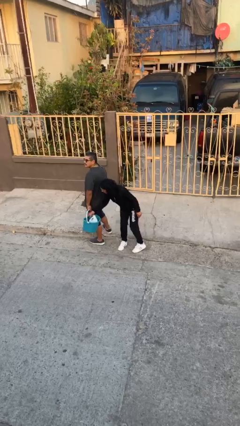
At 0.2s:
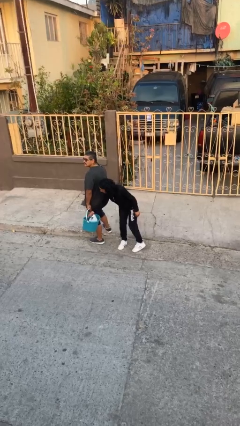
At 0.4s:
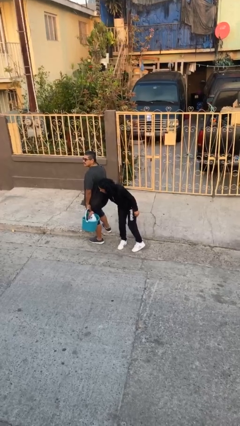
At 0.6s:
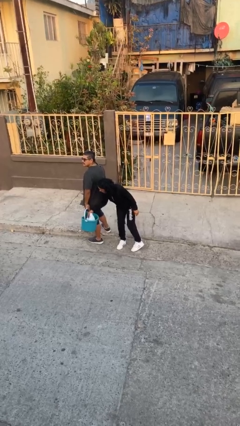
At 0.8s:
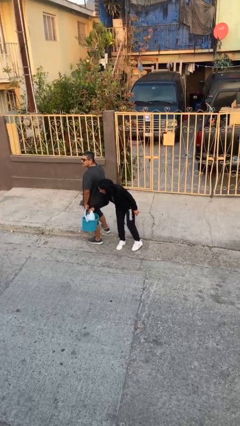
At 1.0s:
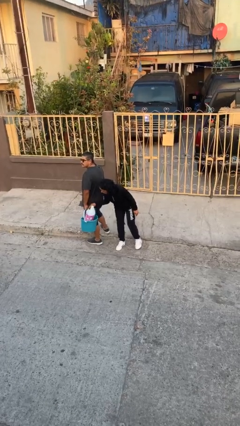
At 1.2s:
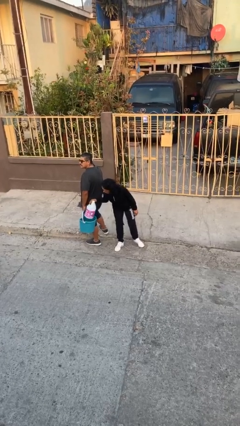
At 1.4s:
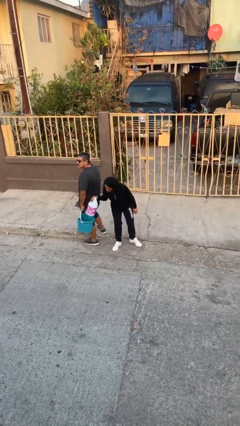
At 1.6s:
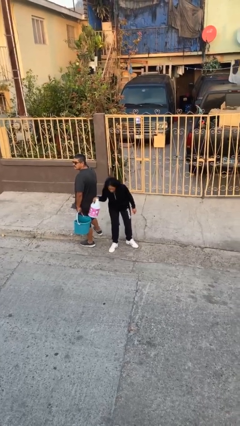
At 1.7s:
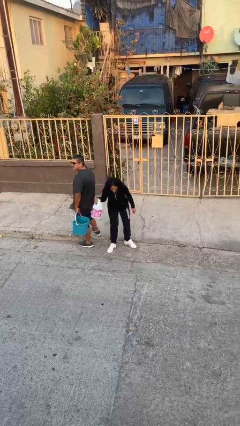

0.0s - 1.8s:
person steals object from person

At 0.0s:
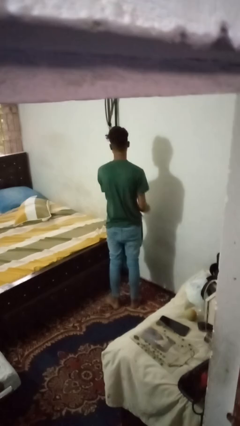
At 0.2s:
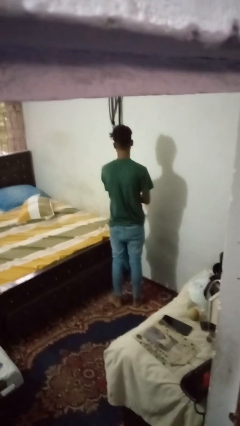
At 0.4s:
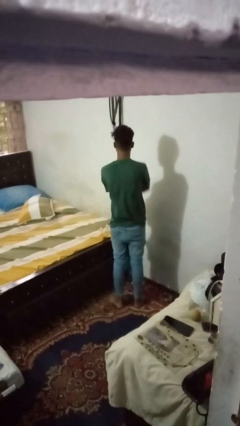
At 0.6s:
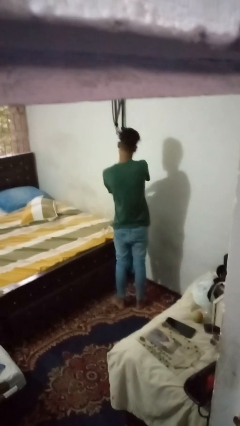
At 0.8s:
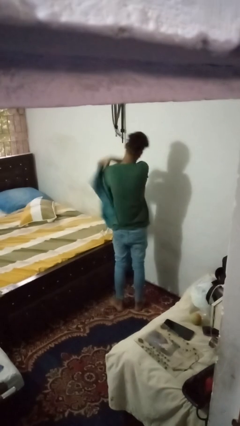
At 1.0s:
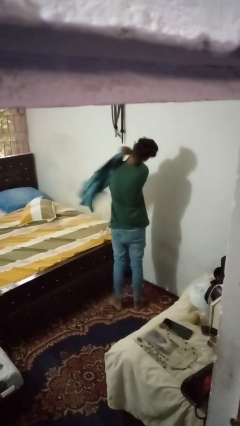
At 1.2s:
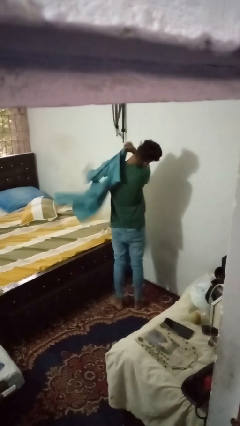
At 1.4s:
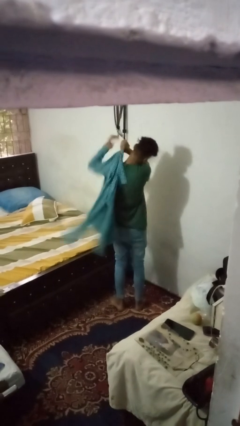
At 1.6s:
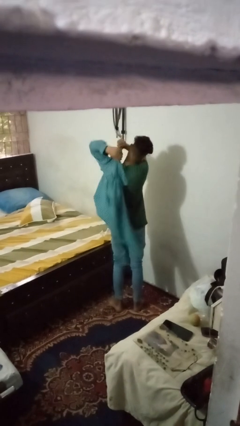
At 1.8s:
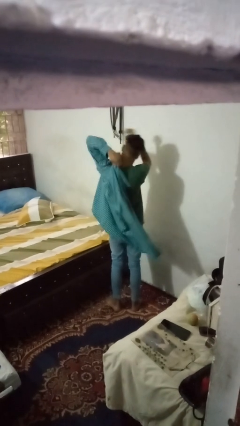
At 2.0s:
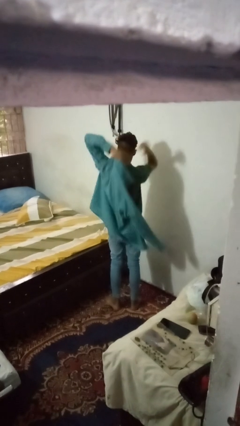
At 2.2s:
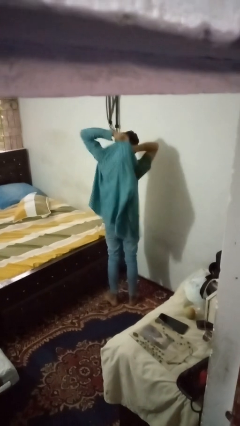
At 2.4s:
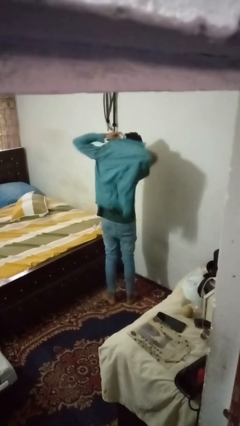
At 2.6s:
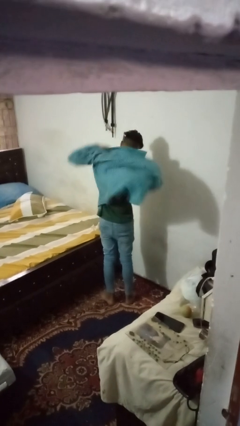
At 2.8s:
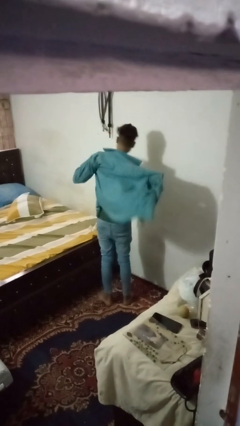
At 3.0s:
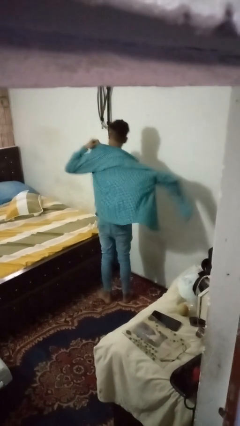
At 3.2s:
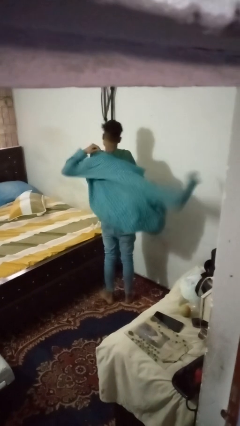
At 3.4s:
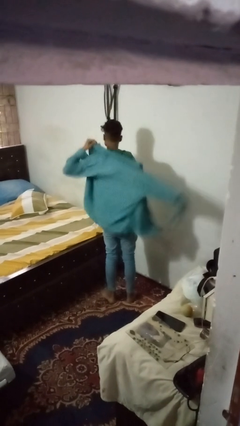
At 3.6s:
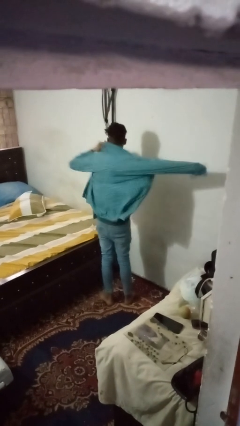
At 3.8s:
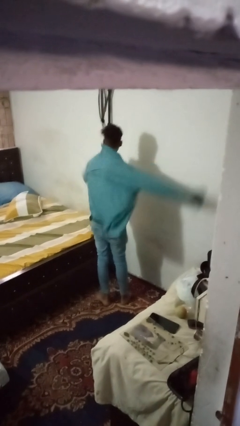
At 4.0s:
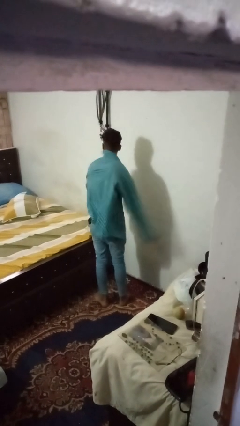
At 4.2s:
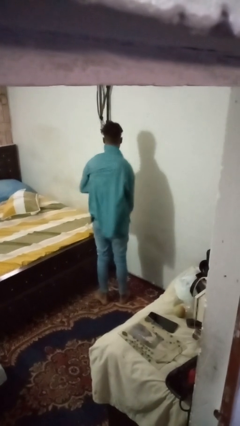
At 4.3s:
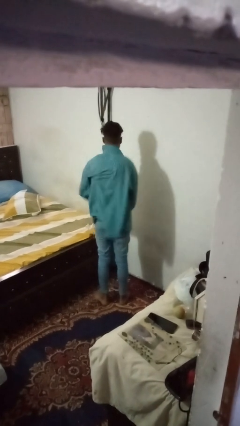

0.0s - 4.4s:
person puts on shirt

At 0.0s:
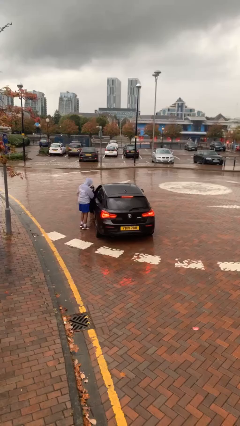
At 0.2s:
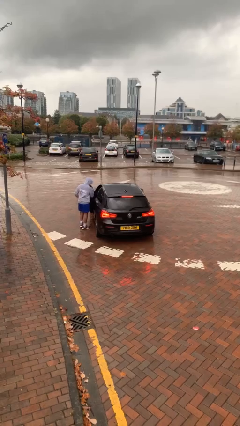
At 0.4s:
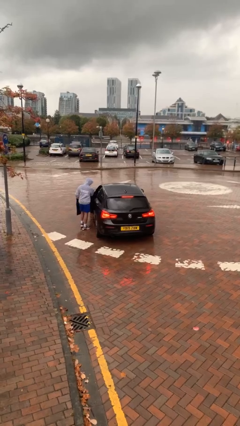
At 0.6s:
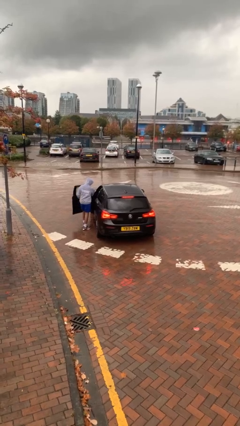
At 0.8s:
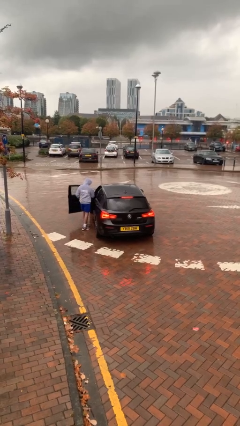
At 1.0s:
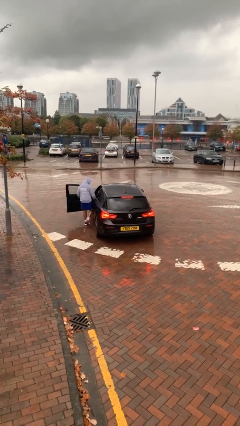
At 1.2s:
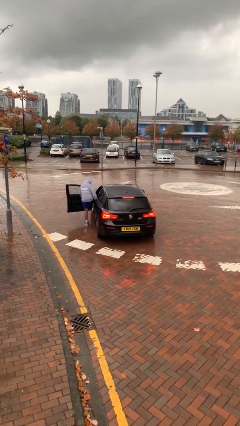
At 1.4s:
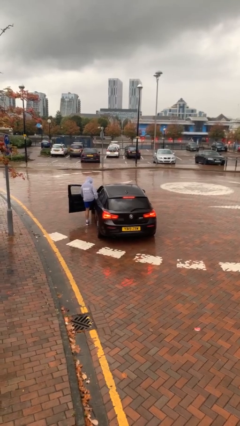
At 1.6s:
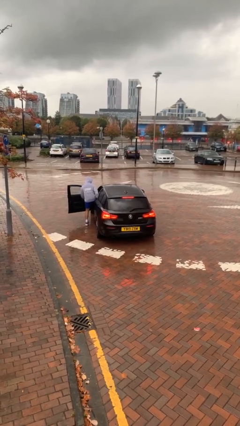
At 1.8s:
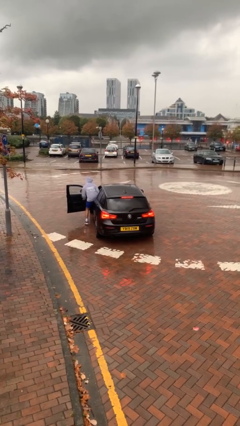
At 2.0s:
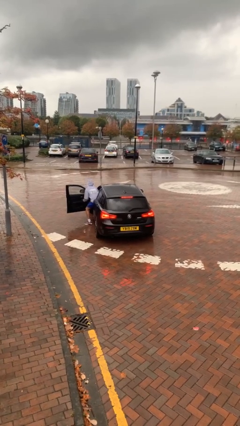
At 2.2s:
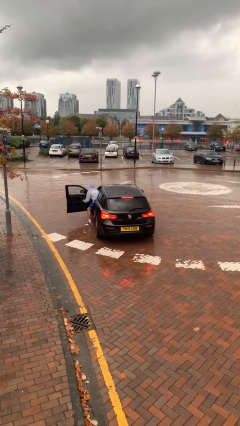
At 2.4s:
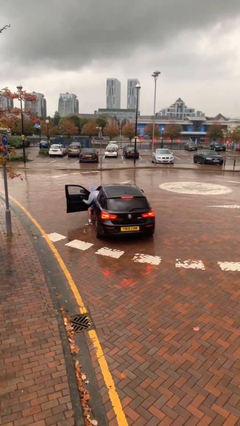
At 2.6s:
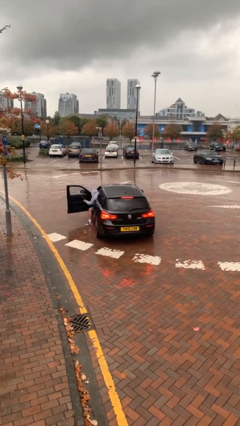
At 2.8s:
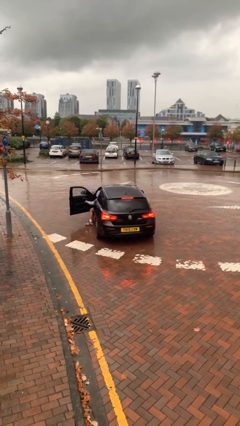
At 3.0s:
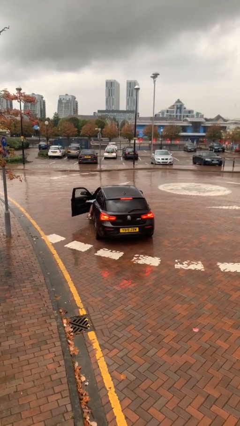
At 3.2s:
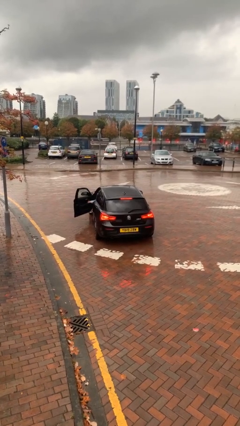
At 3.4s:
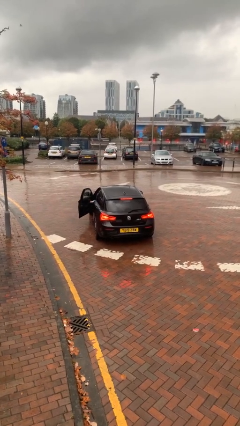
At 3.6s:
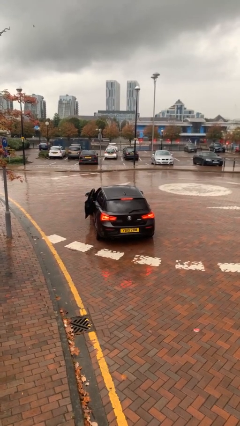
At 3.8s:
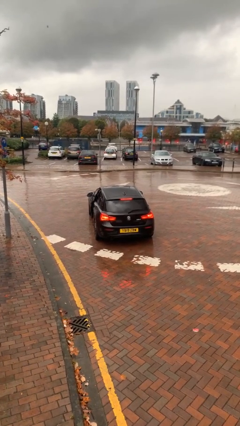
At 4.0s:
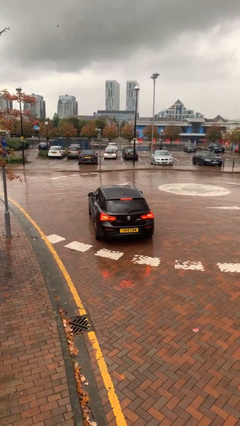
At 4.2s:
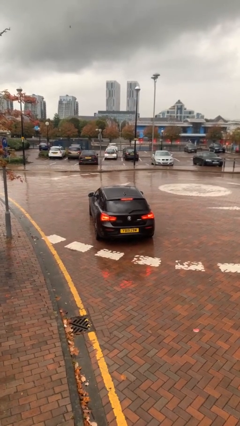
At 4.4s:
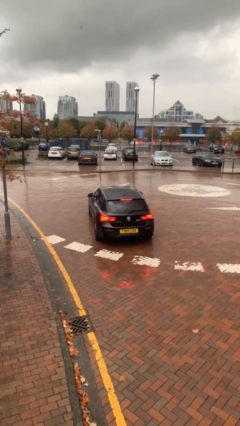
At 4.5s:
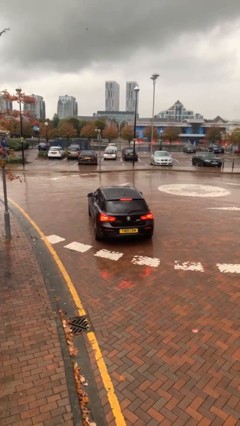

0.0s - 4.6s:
car picks up person

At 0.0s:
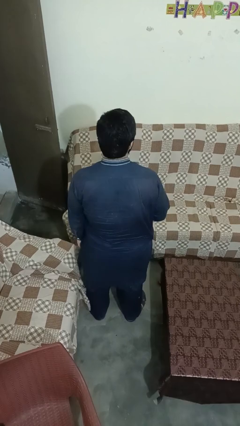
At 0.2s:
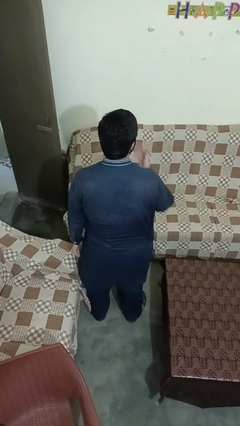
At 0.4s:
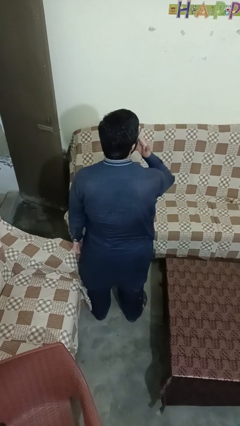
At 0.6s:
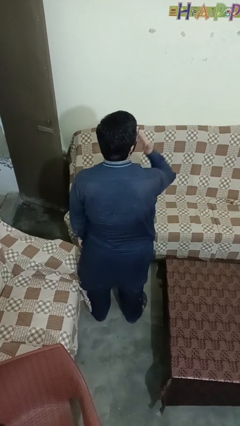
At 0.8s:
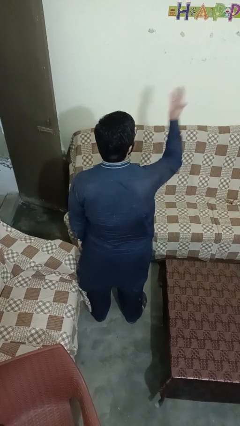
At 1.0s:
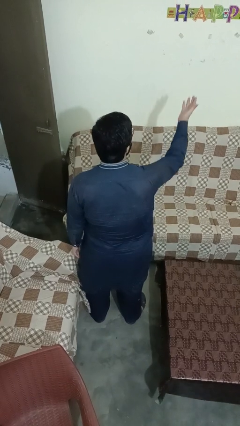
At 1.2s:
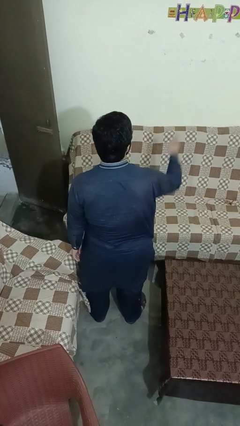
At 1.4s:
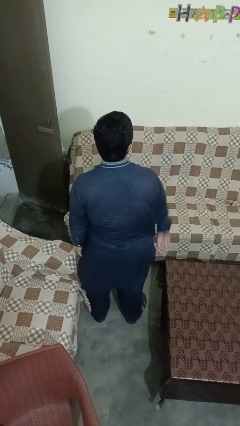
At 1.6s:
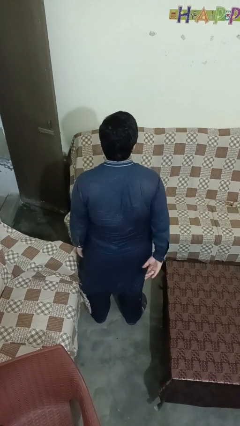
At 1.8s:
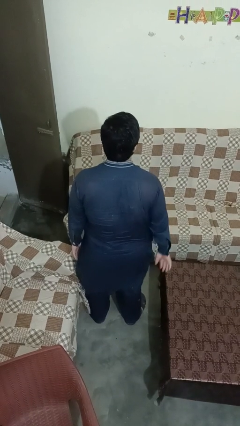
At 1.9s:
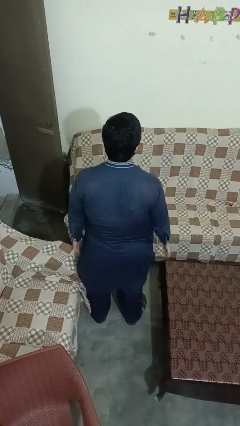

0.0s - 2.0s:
person gestures blow kiss

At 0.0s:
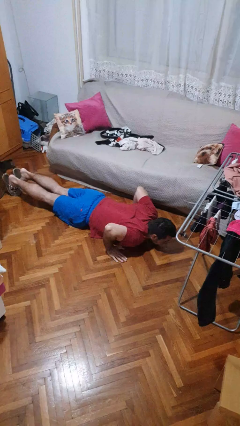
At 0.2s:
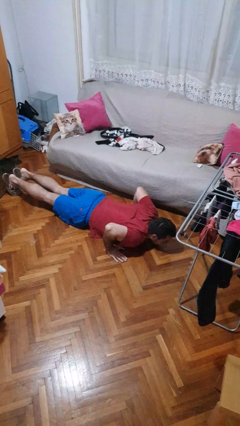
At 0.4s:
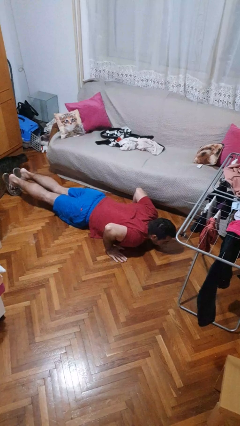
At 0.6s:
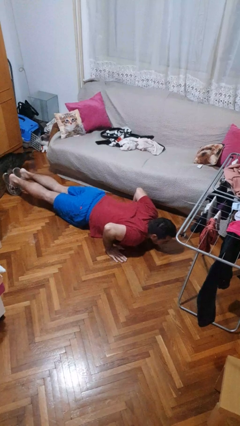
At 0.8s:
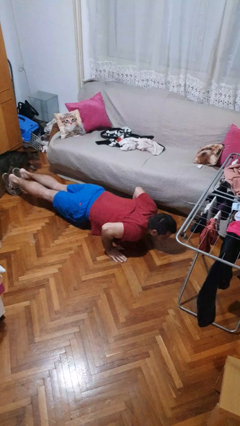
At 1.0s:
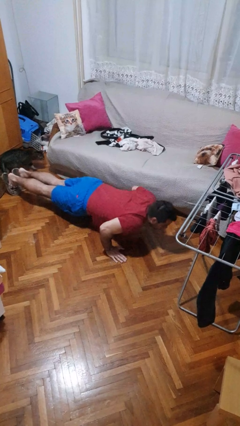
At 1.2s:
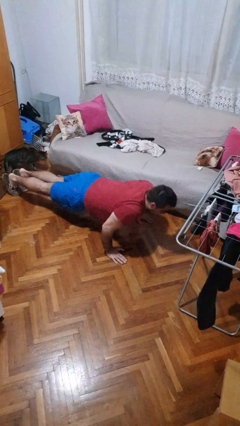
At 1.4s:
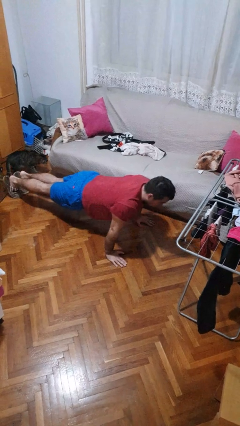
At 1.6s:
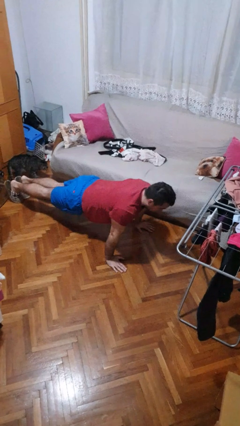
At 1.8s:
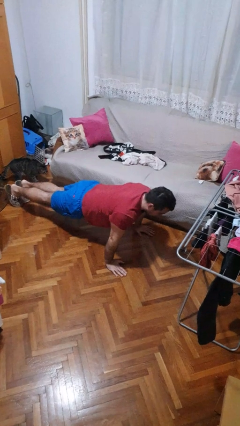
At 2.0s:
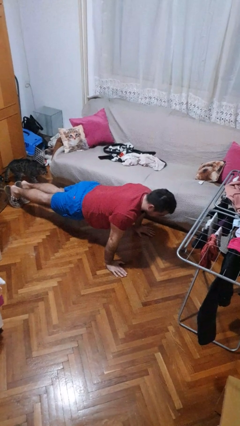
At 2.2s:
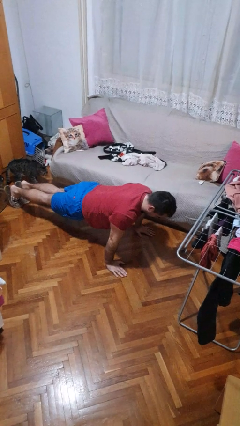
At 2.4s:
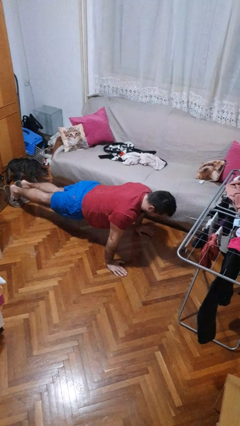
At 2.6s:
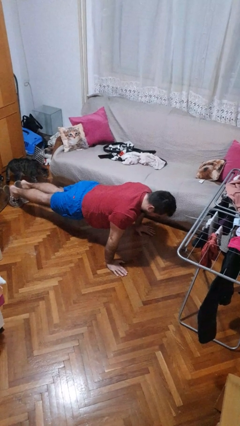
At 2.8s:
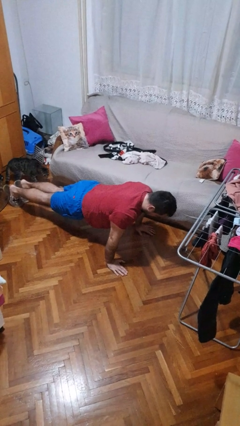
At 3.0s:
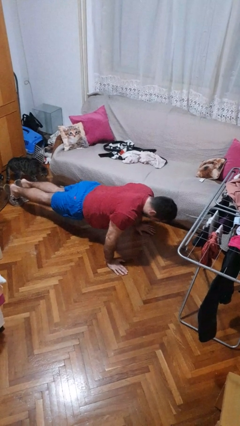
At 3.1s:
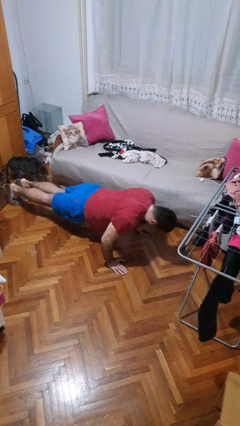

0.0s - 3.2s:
person exercises with pushup

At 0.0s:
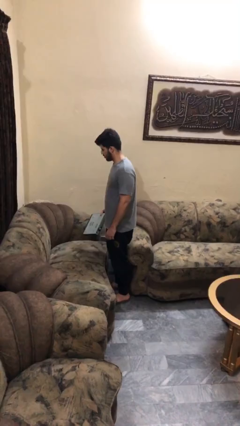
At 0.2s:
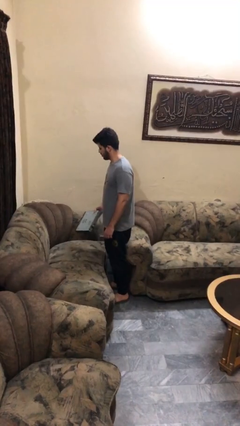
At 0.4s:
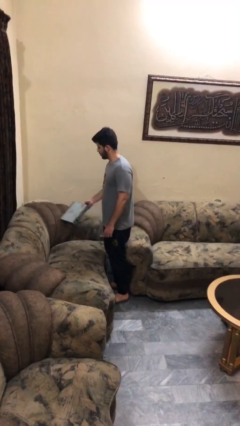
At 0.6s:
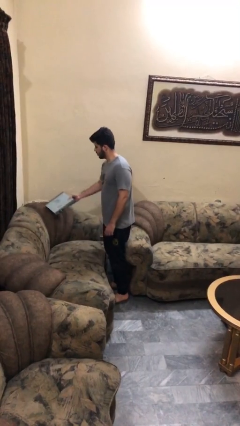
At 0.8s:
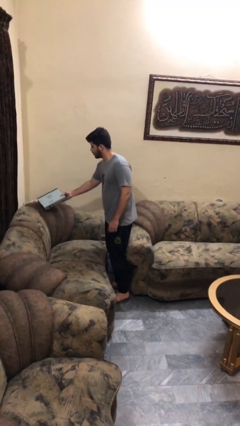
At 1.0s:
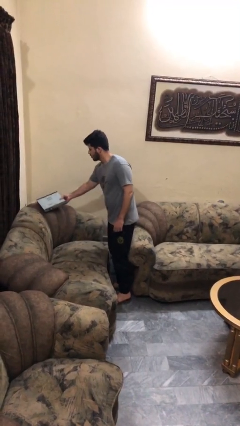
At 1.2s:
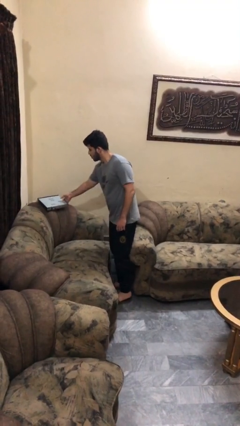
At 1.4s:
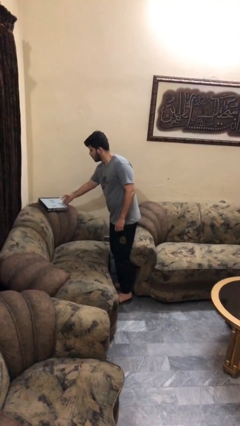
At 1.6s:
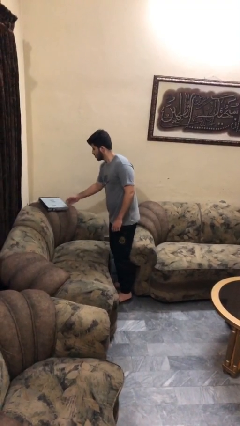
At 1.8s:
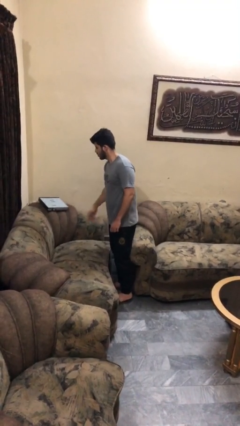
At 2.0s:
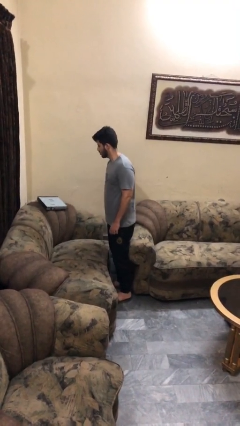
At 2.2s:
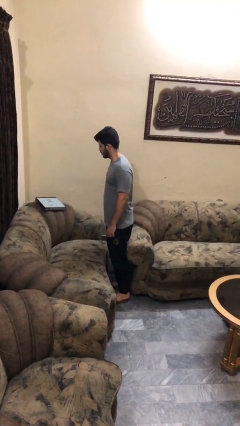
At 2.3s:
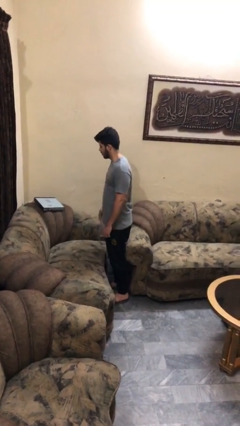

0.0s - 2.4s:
person puts down object on couch
